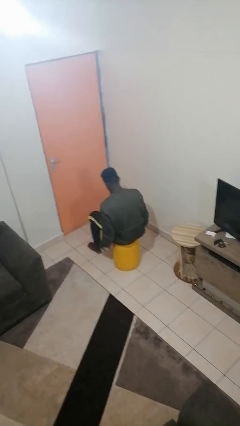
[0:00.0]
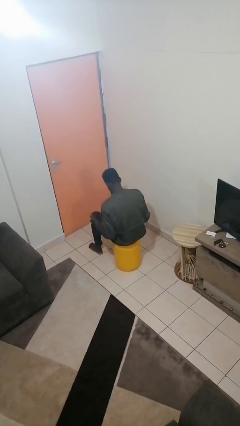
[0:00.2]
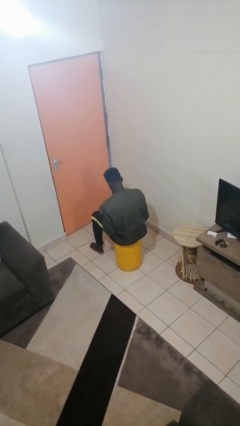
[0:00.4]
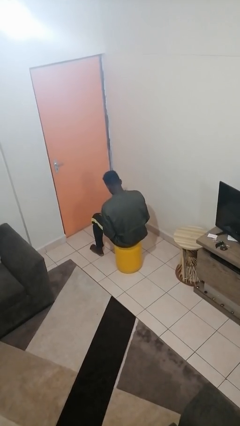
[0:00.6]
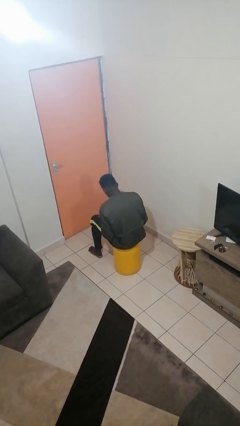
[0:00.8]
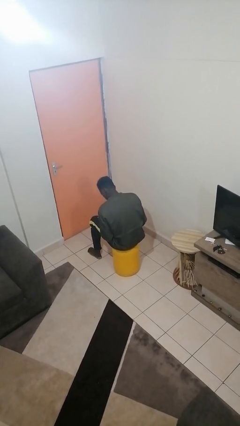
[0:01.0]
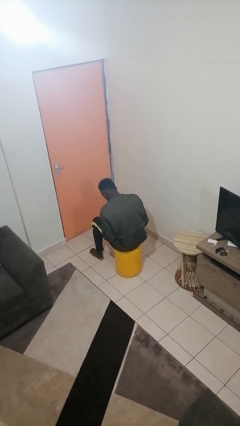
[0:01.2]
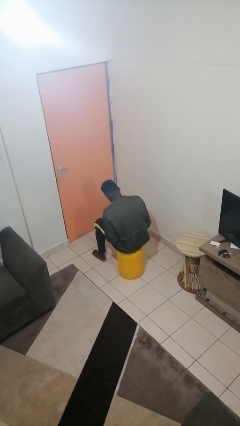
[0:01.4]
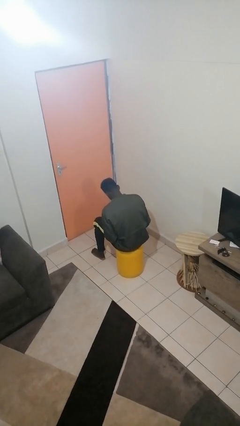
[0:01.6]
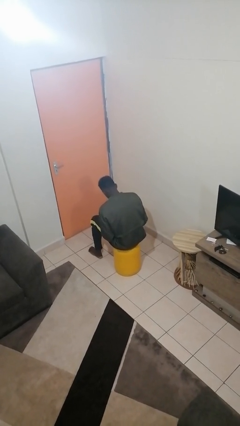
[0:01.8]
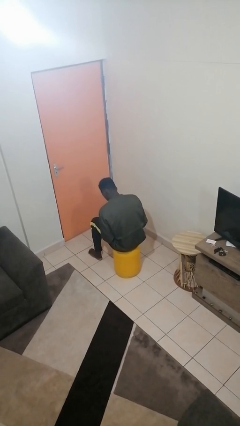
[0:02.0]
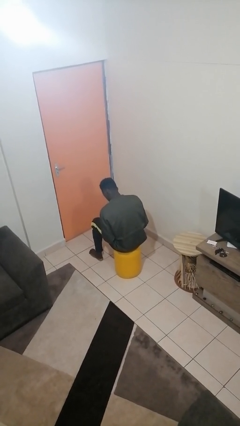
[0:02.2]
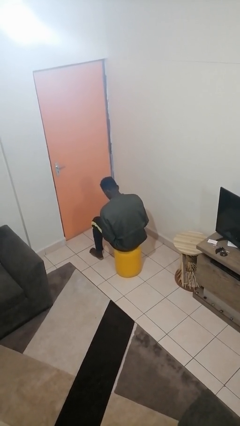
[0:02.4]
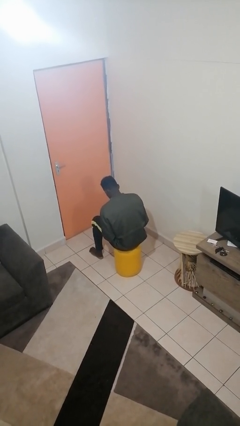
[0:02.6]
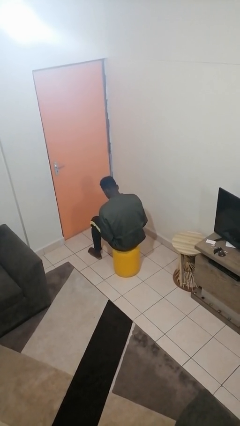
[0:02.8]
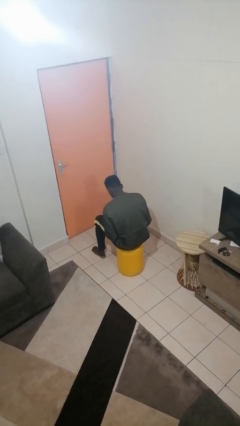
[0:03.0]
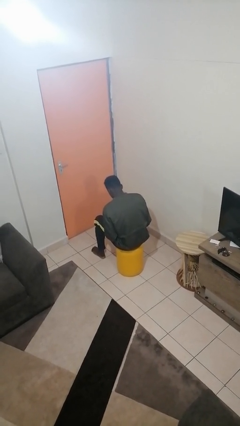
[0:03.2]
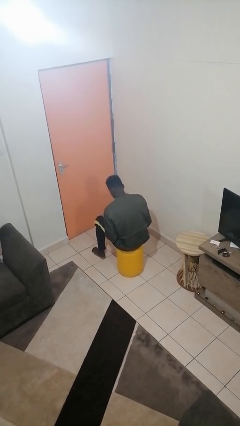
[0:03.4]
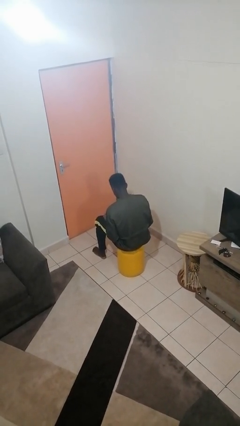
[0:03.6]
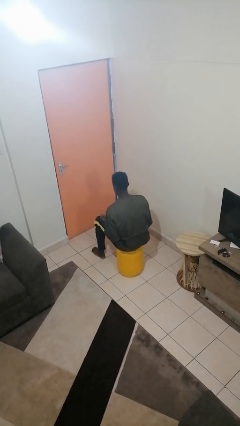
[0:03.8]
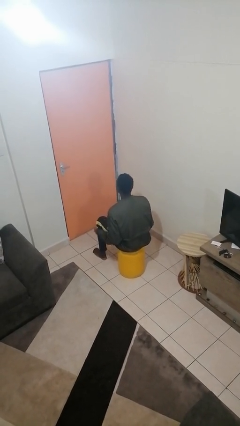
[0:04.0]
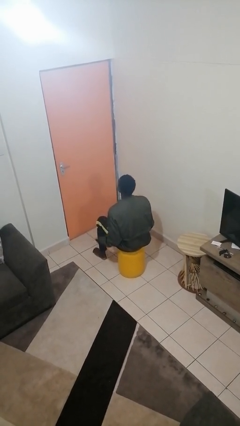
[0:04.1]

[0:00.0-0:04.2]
person looks at hands in lap

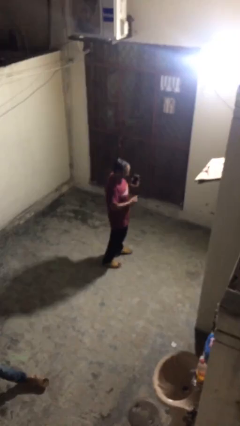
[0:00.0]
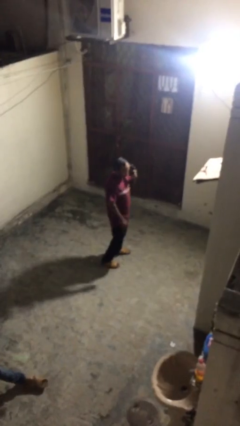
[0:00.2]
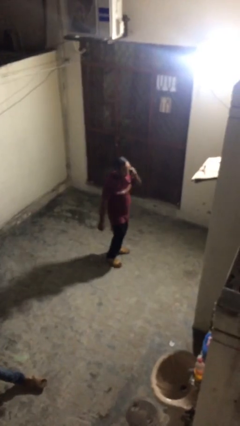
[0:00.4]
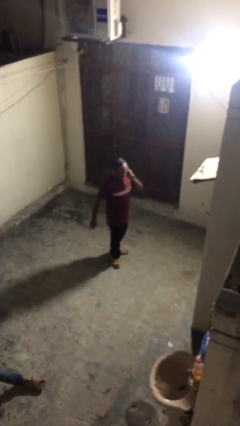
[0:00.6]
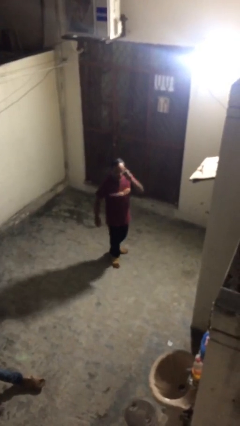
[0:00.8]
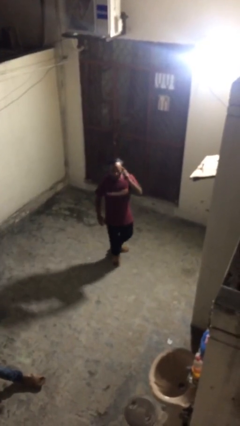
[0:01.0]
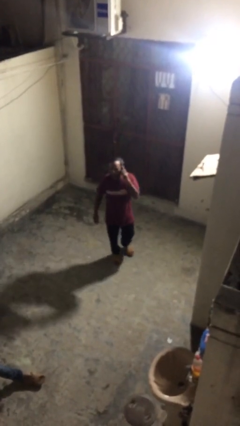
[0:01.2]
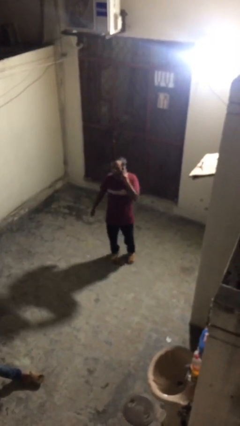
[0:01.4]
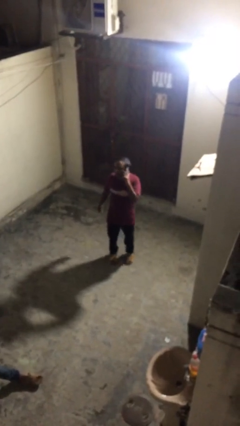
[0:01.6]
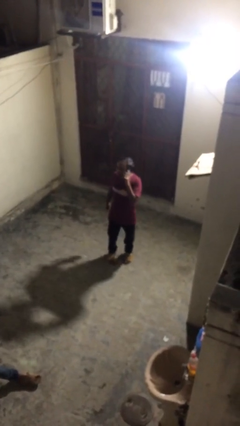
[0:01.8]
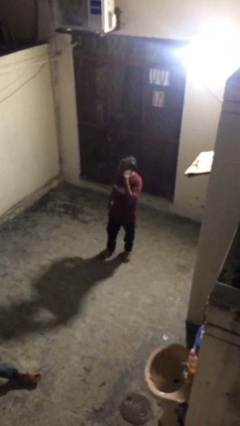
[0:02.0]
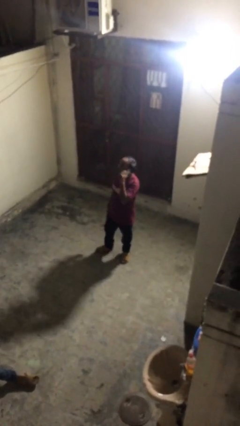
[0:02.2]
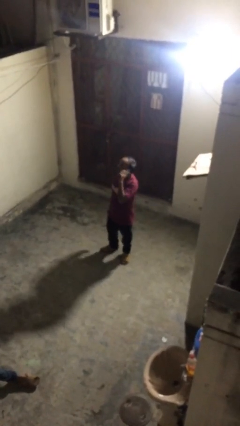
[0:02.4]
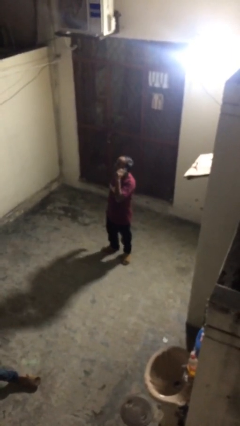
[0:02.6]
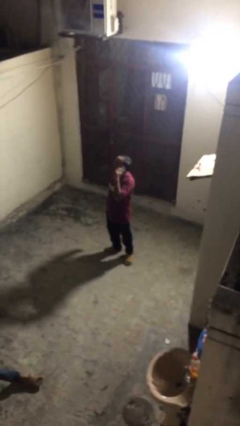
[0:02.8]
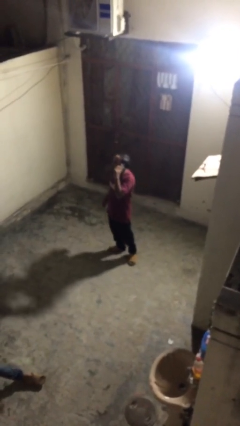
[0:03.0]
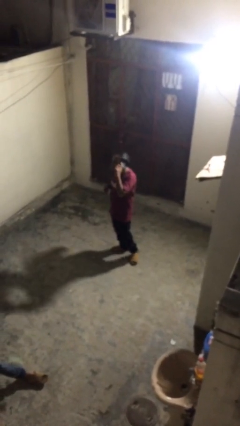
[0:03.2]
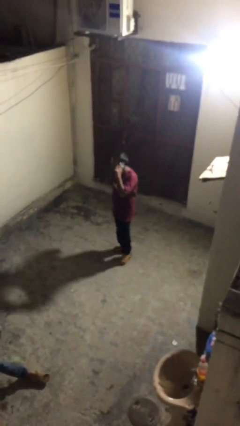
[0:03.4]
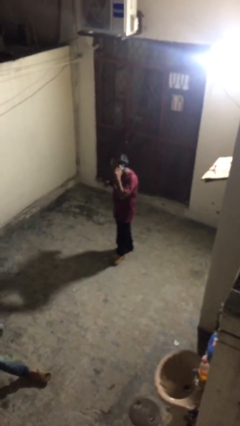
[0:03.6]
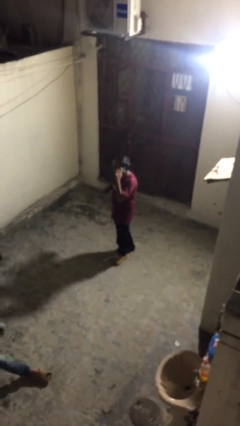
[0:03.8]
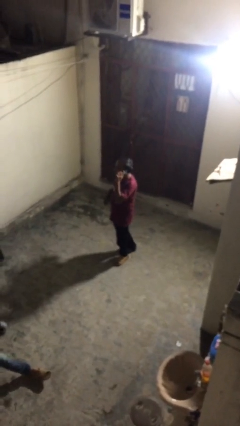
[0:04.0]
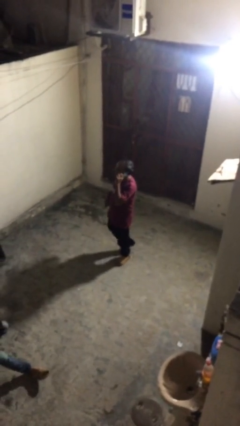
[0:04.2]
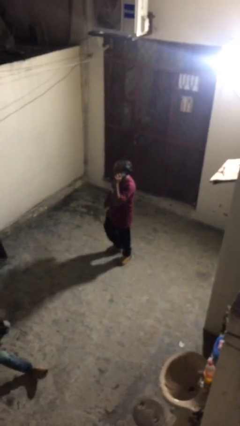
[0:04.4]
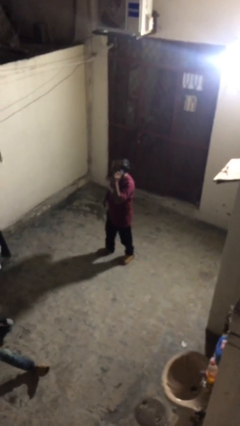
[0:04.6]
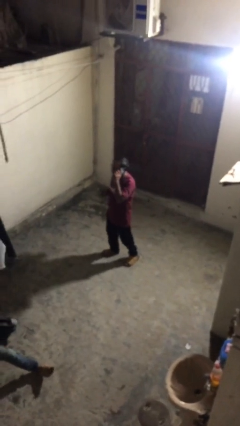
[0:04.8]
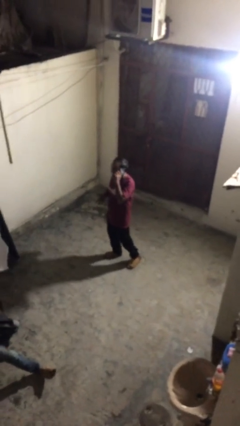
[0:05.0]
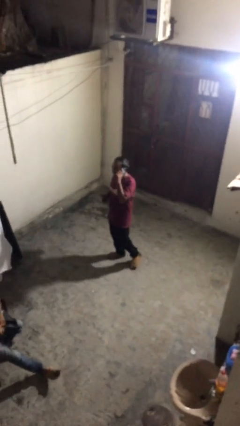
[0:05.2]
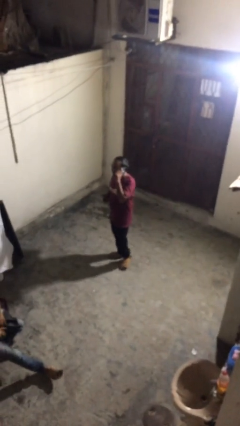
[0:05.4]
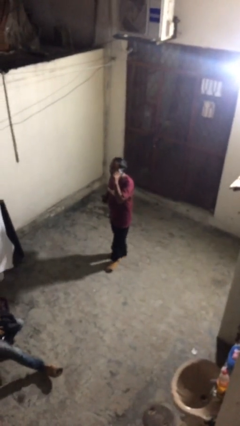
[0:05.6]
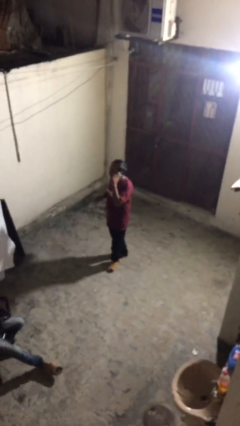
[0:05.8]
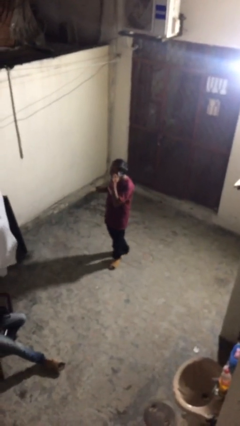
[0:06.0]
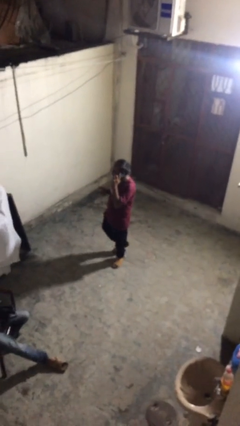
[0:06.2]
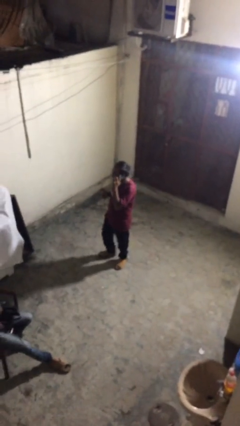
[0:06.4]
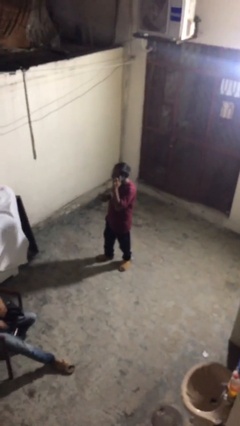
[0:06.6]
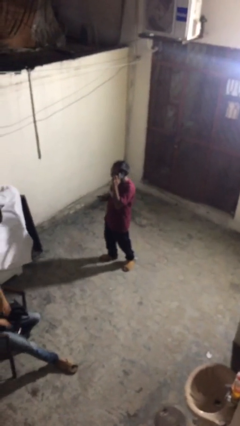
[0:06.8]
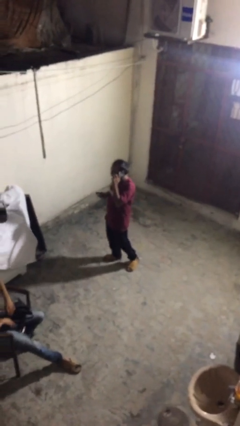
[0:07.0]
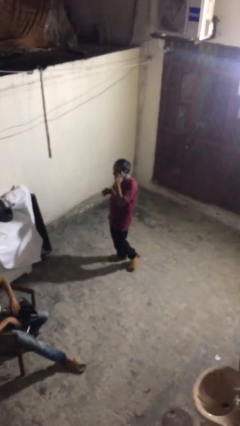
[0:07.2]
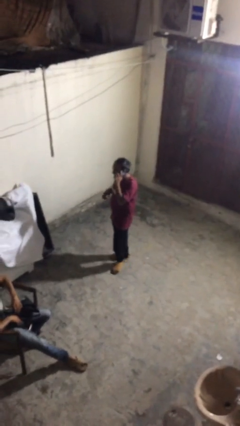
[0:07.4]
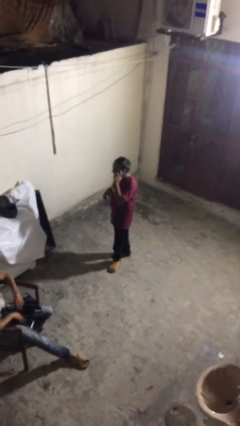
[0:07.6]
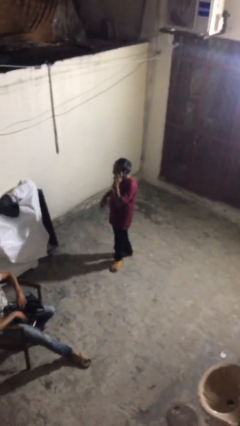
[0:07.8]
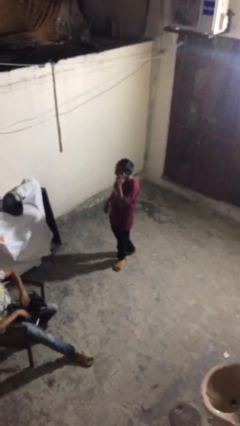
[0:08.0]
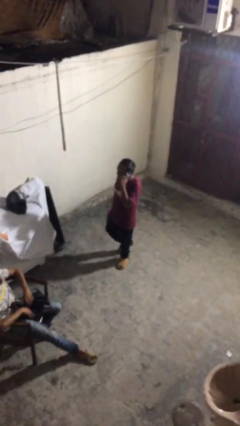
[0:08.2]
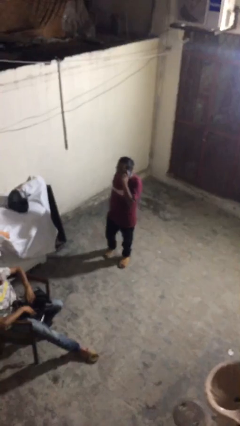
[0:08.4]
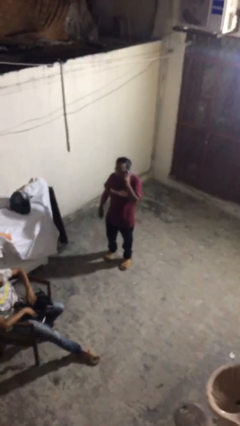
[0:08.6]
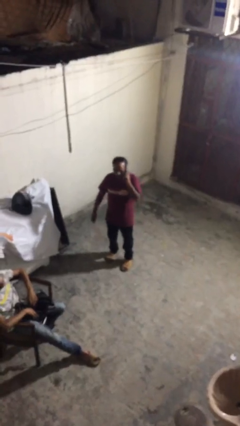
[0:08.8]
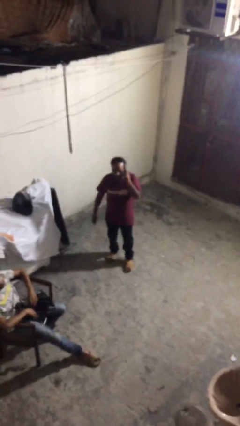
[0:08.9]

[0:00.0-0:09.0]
person talks on phone

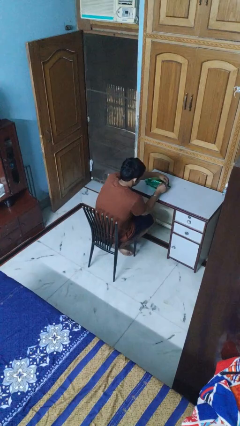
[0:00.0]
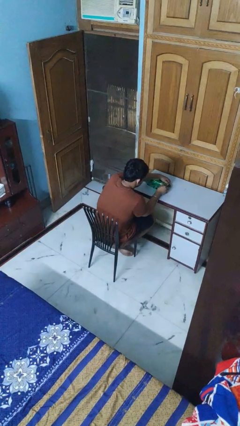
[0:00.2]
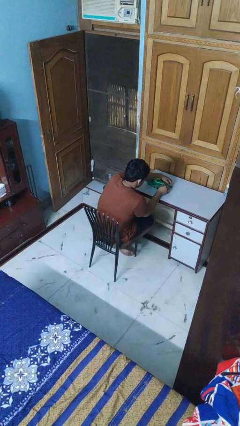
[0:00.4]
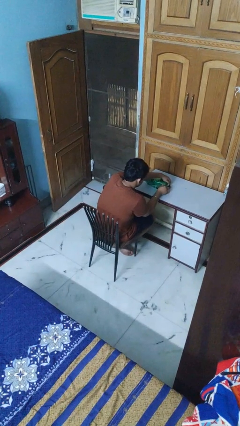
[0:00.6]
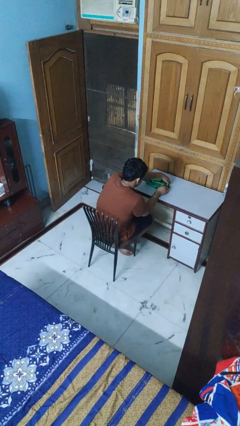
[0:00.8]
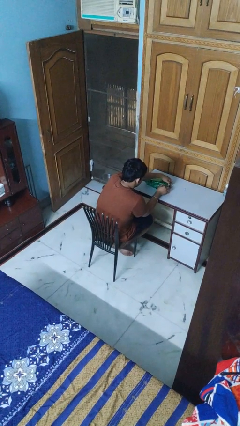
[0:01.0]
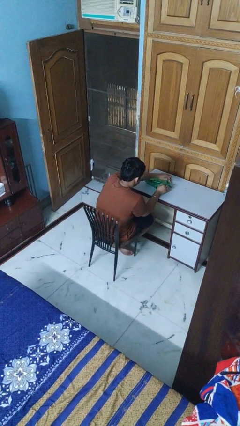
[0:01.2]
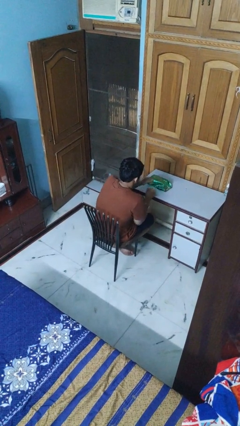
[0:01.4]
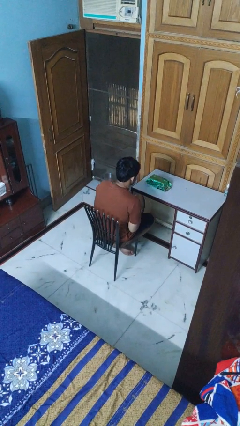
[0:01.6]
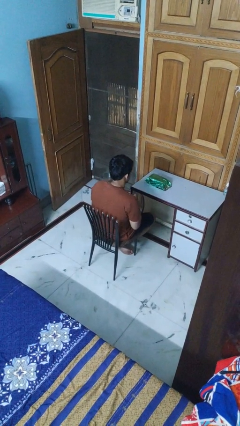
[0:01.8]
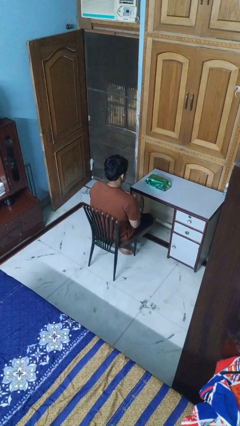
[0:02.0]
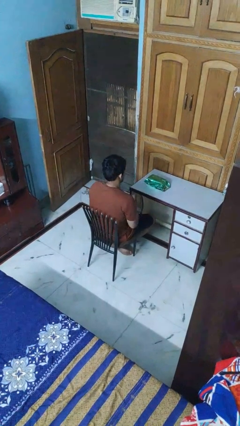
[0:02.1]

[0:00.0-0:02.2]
person wraps box

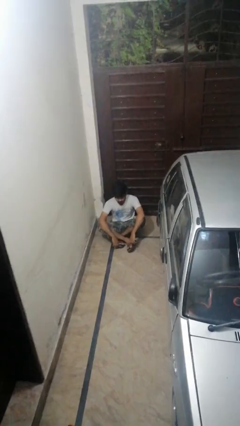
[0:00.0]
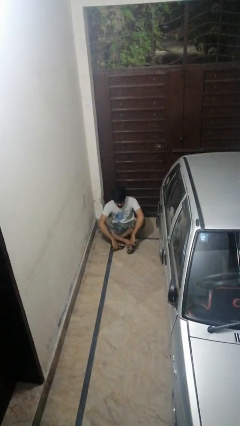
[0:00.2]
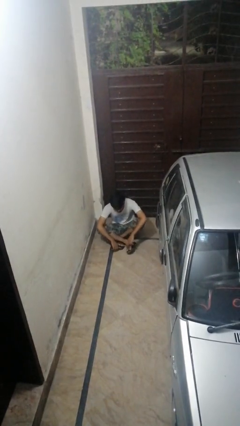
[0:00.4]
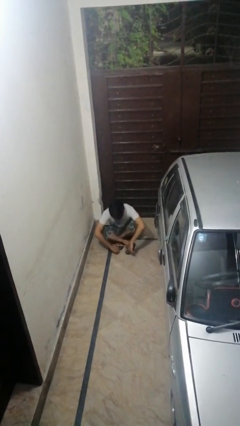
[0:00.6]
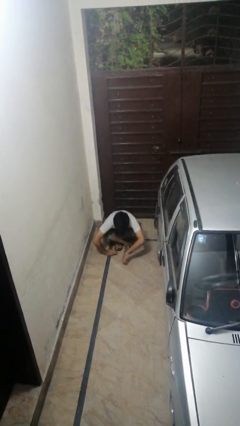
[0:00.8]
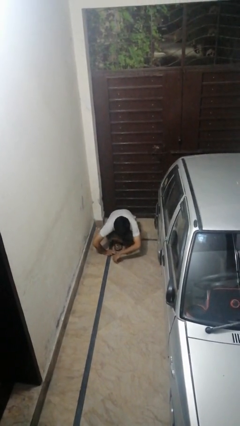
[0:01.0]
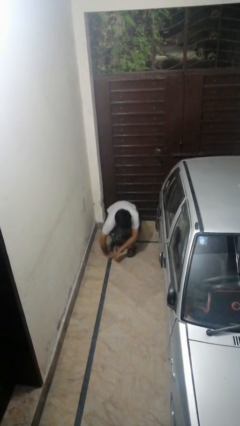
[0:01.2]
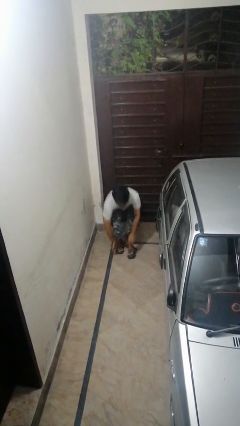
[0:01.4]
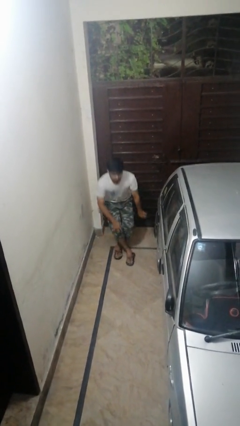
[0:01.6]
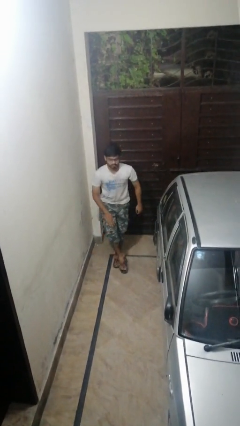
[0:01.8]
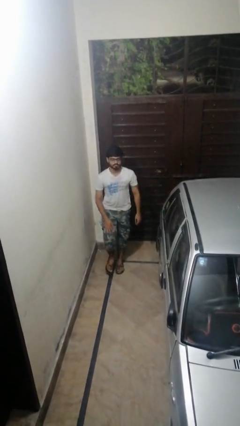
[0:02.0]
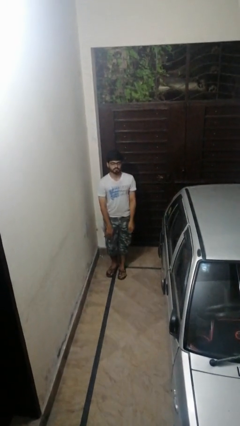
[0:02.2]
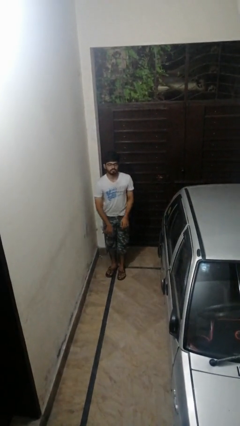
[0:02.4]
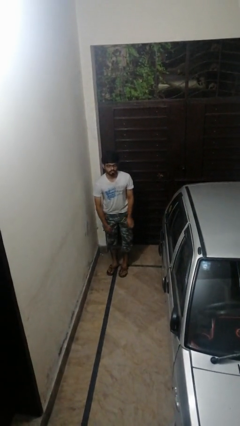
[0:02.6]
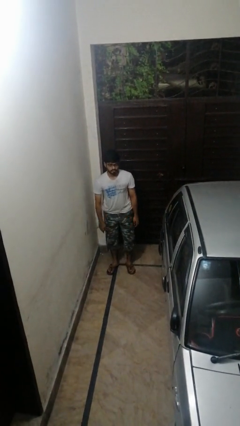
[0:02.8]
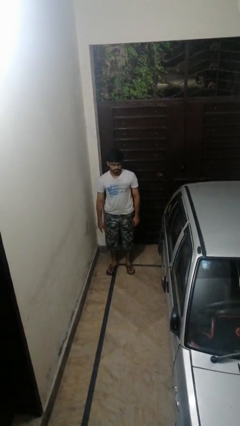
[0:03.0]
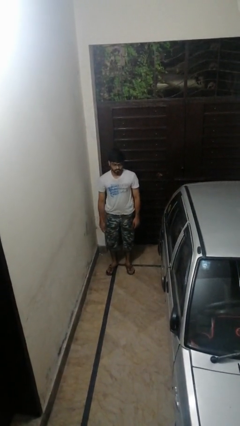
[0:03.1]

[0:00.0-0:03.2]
person stands up from floor
